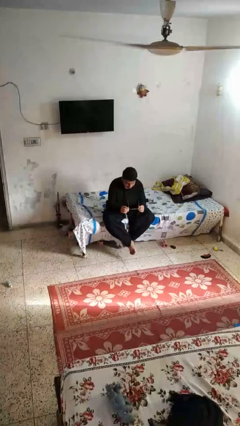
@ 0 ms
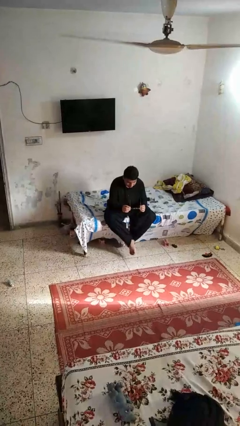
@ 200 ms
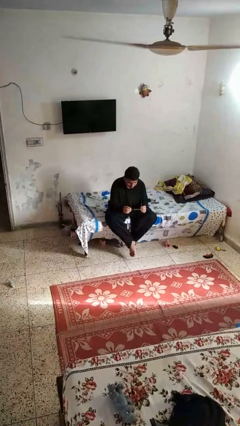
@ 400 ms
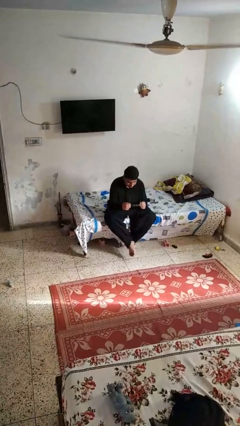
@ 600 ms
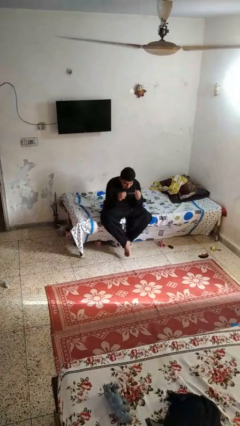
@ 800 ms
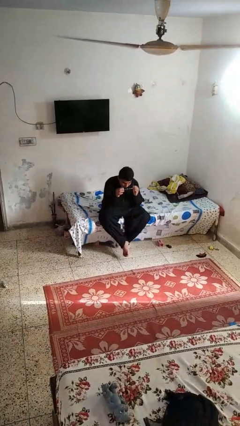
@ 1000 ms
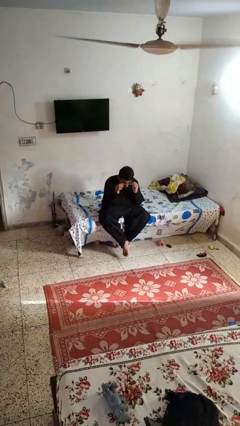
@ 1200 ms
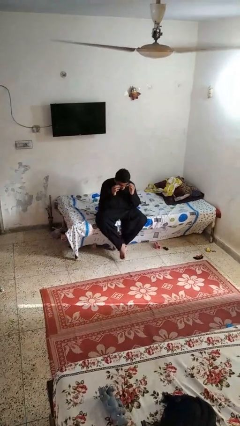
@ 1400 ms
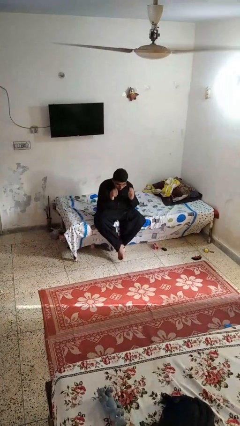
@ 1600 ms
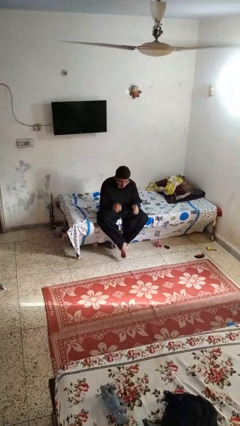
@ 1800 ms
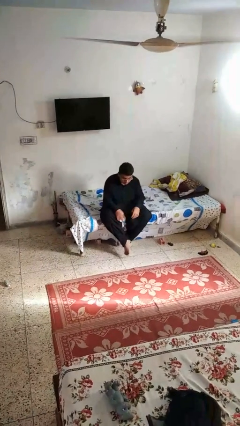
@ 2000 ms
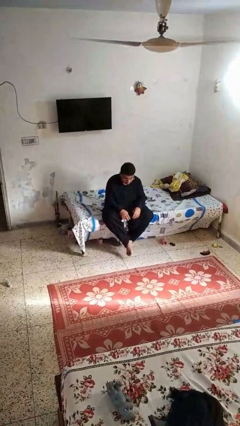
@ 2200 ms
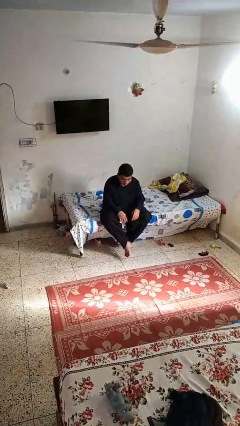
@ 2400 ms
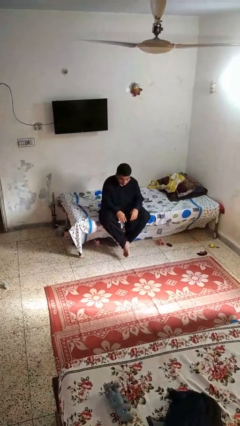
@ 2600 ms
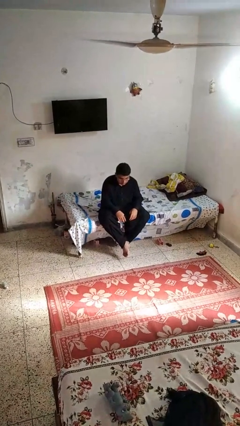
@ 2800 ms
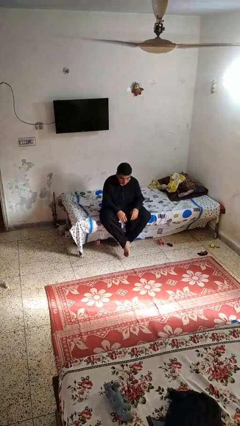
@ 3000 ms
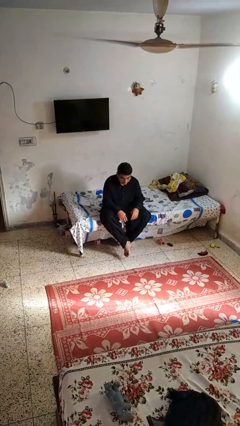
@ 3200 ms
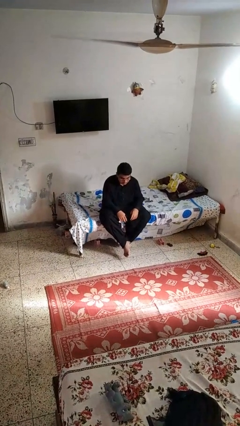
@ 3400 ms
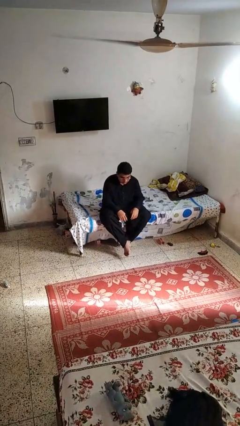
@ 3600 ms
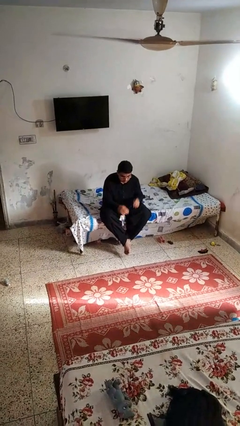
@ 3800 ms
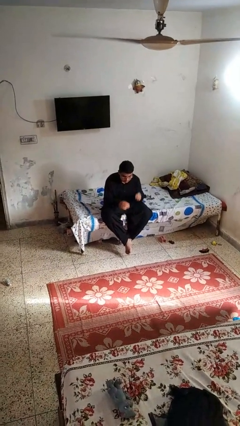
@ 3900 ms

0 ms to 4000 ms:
person puts on glasses

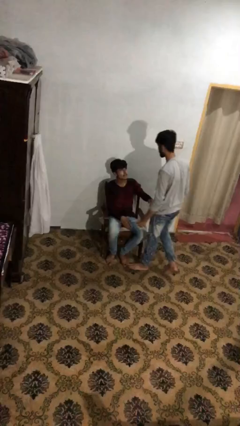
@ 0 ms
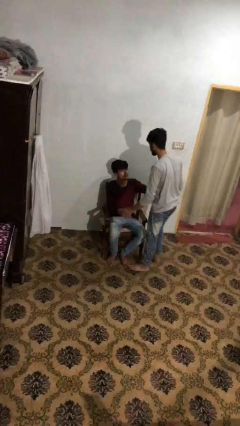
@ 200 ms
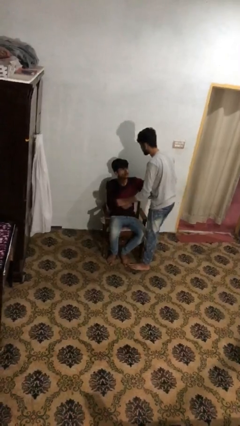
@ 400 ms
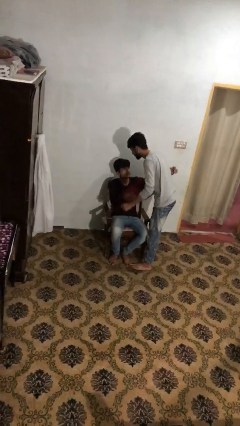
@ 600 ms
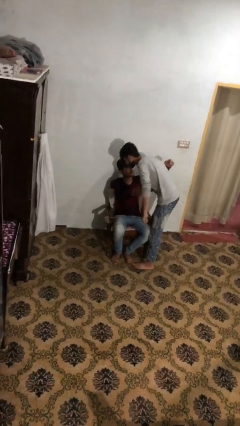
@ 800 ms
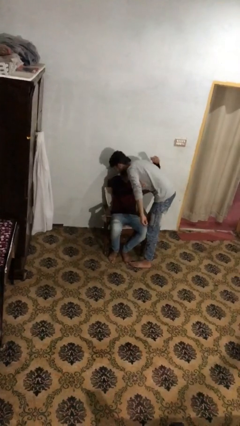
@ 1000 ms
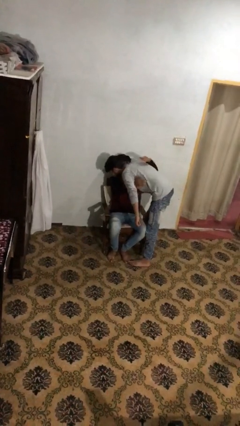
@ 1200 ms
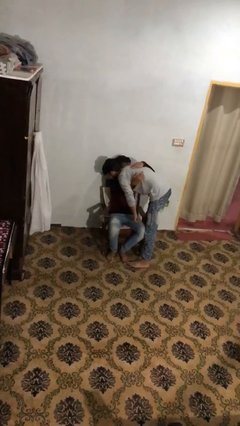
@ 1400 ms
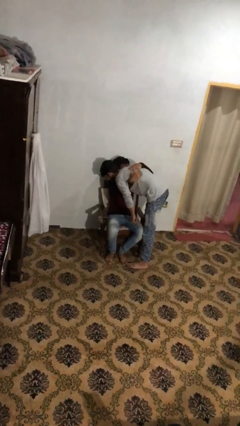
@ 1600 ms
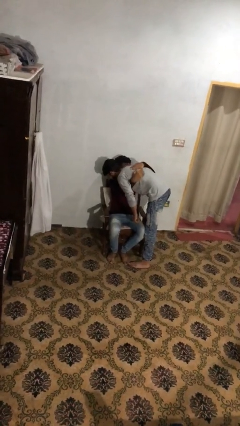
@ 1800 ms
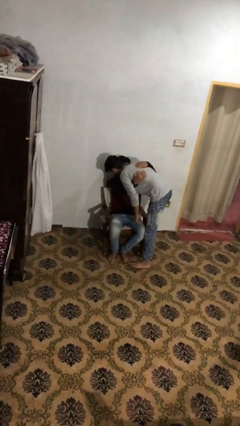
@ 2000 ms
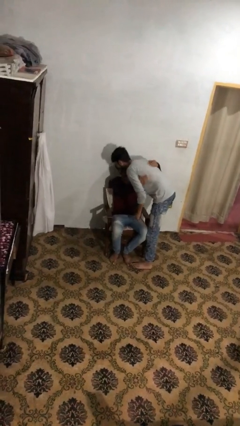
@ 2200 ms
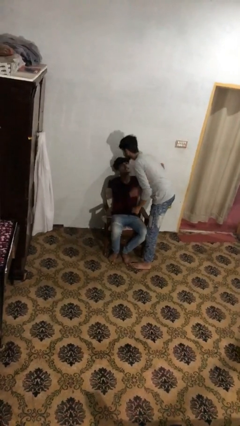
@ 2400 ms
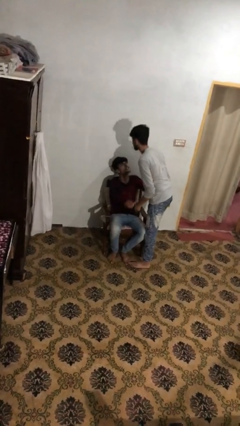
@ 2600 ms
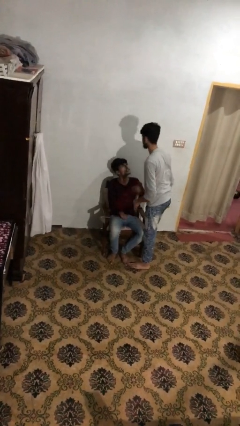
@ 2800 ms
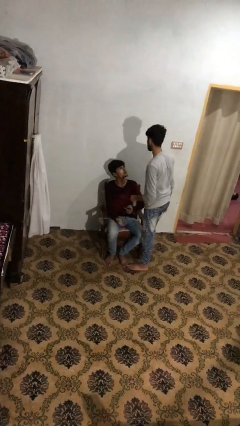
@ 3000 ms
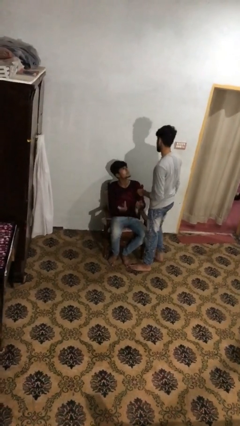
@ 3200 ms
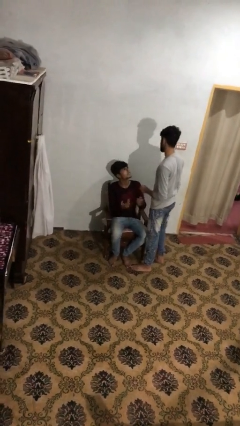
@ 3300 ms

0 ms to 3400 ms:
person embraces person

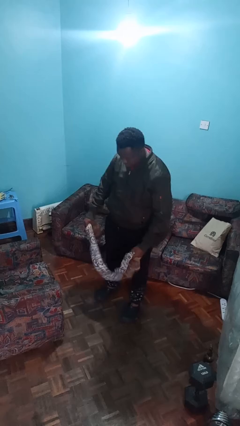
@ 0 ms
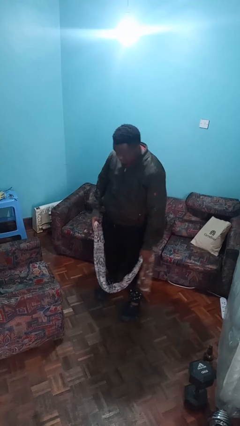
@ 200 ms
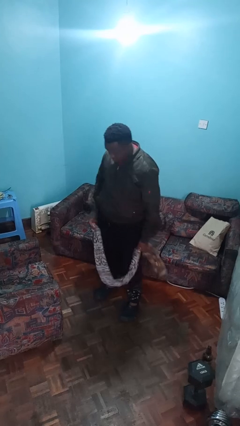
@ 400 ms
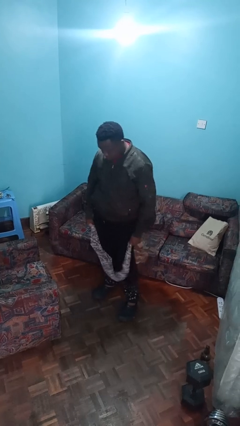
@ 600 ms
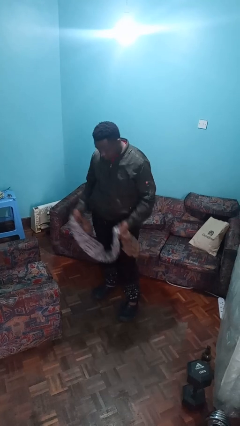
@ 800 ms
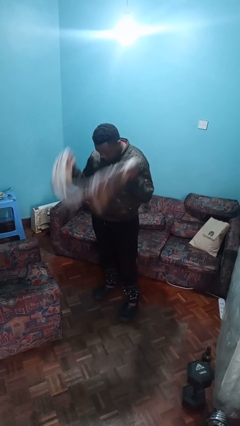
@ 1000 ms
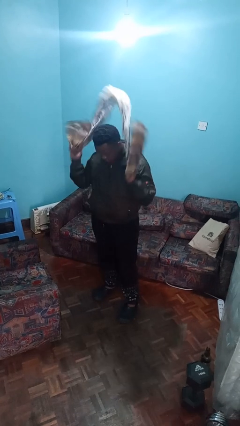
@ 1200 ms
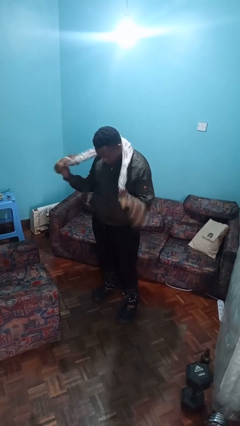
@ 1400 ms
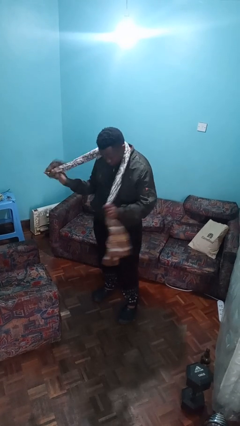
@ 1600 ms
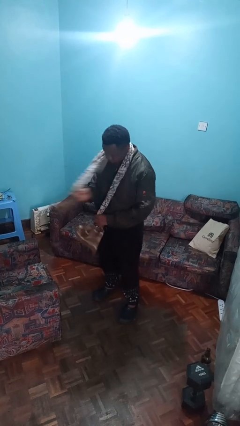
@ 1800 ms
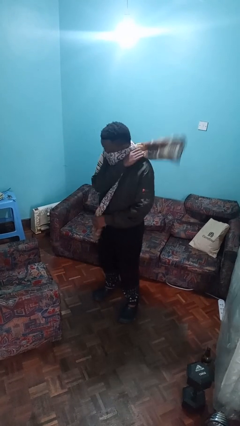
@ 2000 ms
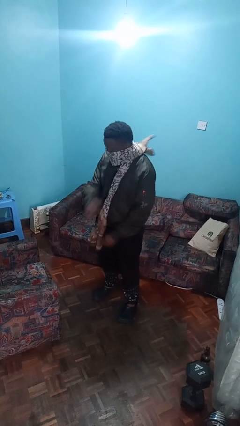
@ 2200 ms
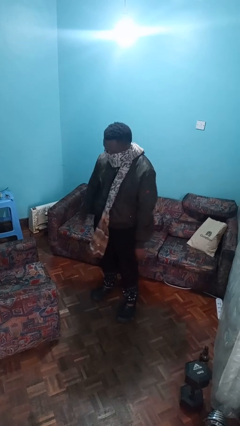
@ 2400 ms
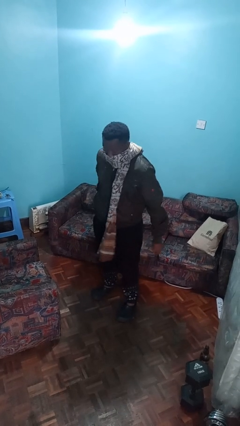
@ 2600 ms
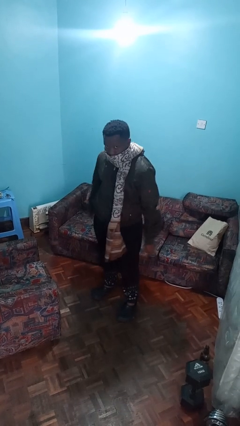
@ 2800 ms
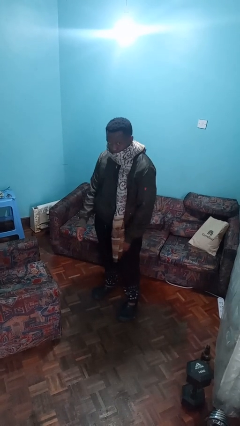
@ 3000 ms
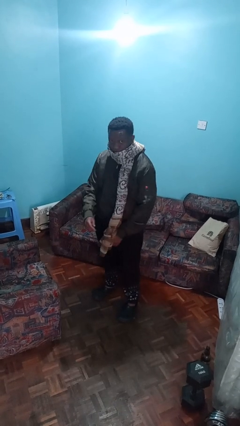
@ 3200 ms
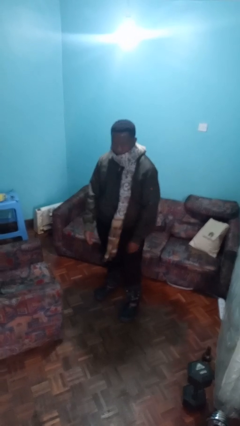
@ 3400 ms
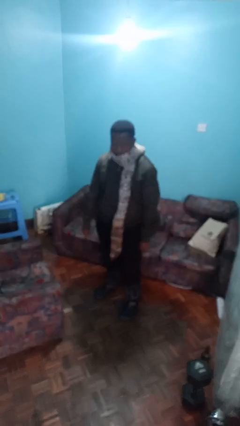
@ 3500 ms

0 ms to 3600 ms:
person puts on scarf

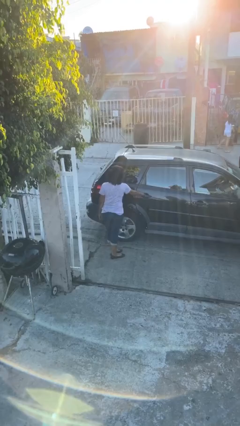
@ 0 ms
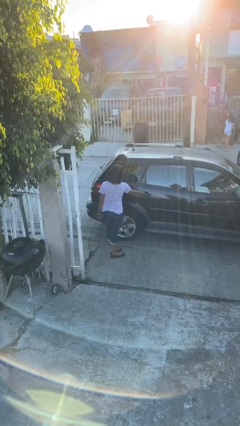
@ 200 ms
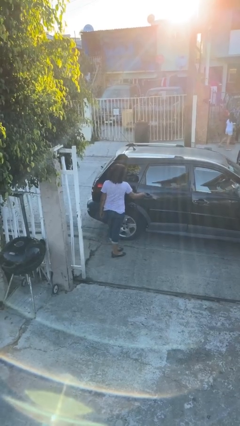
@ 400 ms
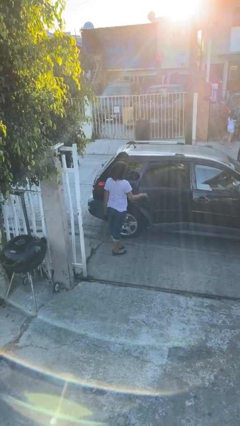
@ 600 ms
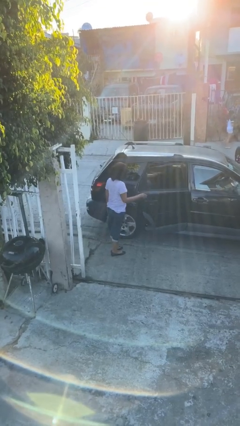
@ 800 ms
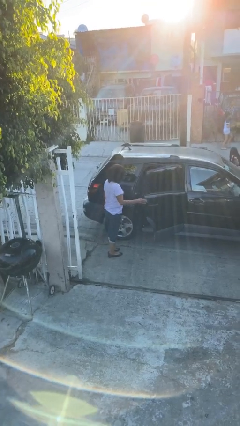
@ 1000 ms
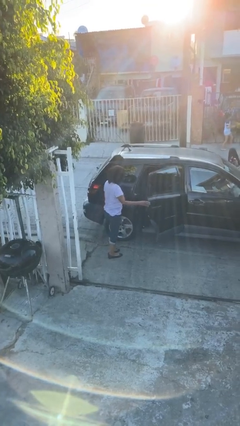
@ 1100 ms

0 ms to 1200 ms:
person opens car door

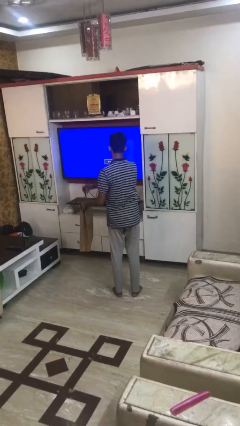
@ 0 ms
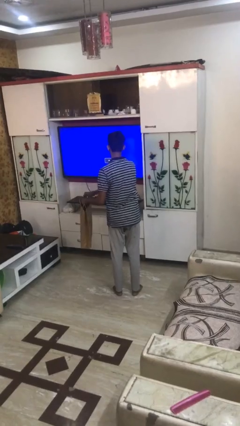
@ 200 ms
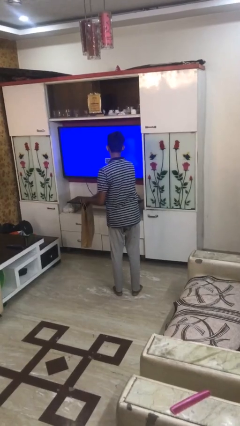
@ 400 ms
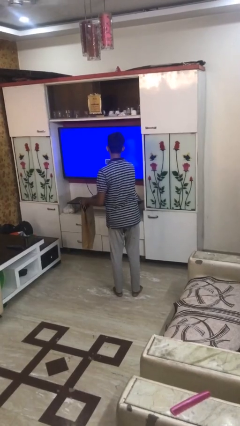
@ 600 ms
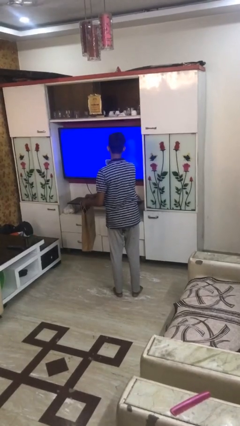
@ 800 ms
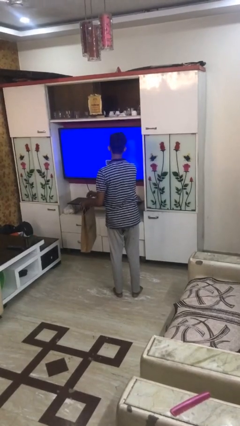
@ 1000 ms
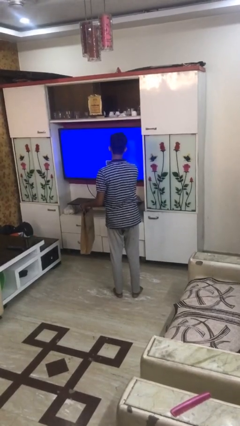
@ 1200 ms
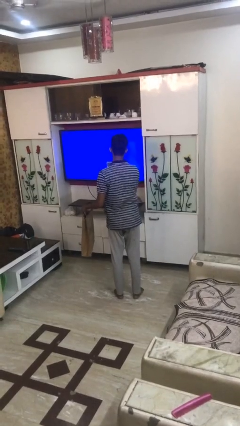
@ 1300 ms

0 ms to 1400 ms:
person puts object into bag

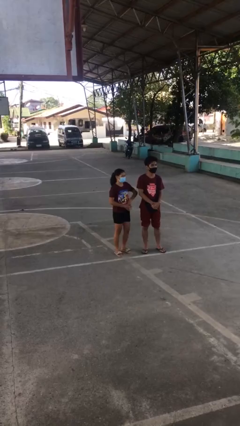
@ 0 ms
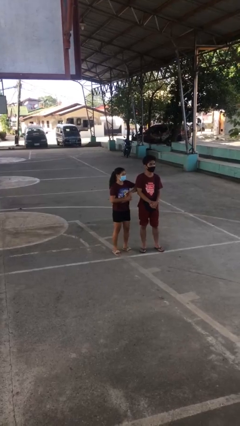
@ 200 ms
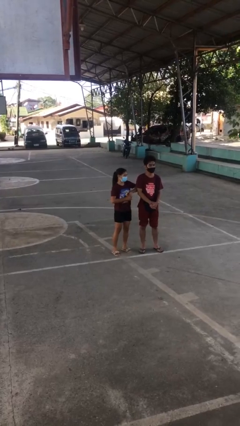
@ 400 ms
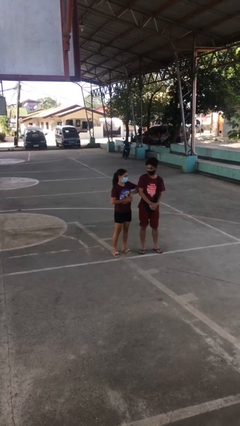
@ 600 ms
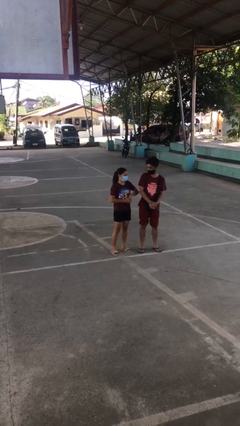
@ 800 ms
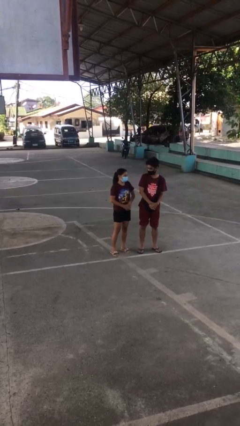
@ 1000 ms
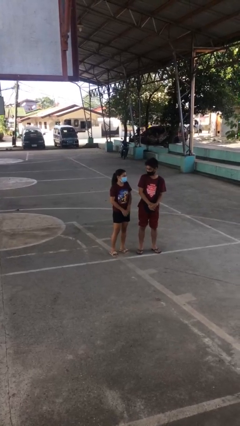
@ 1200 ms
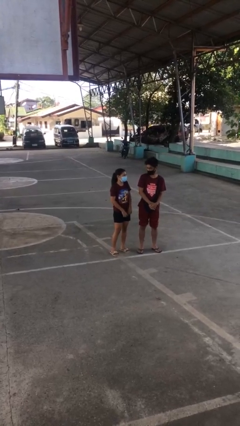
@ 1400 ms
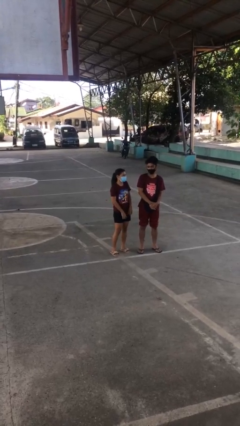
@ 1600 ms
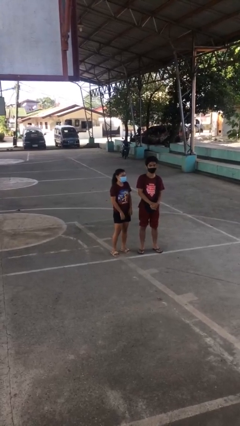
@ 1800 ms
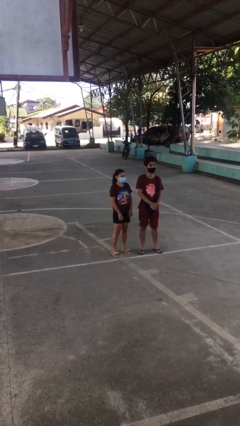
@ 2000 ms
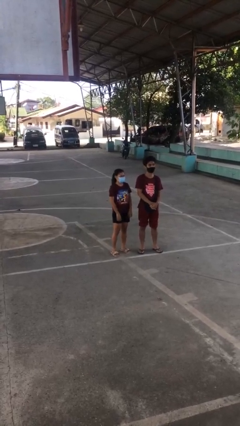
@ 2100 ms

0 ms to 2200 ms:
person nudges person with elbow

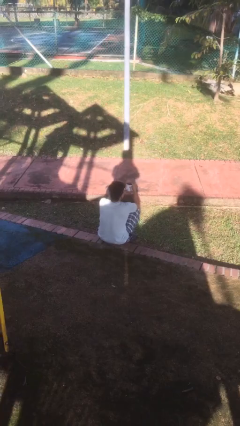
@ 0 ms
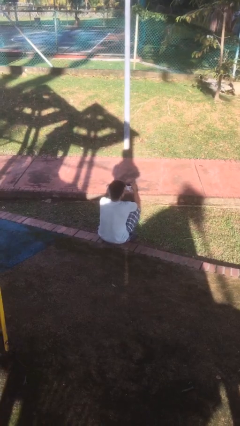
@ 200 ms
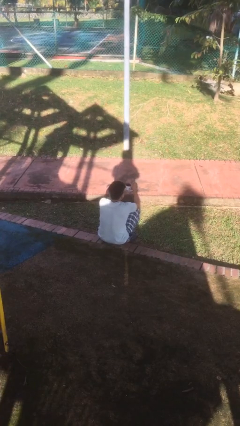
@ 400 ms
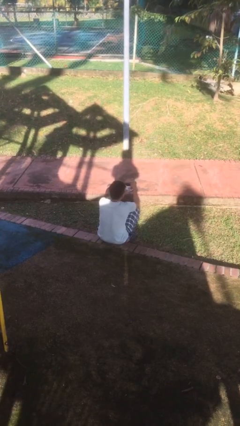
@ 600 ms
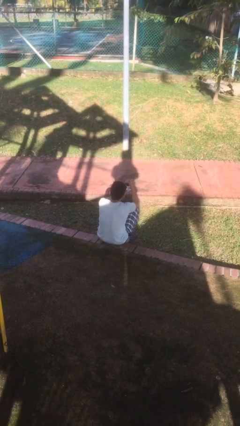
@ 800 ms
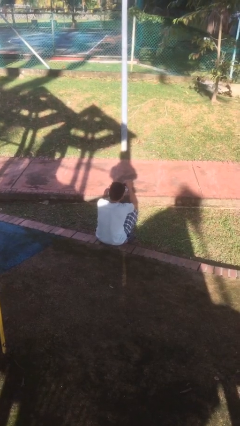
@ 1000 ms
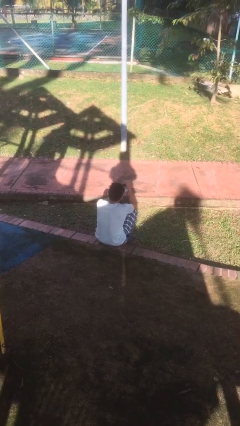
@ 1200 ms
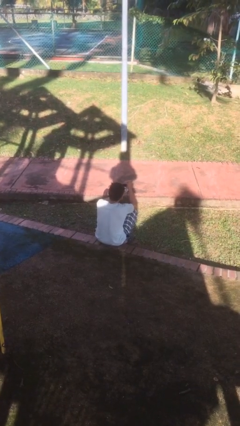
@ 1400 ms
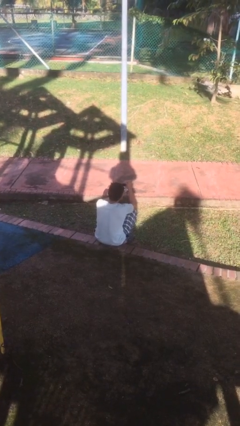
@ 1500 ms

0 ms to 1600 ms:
person stirs mug
